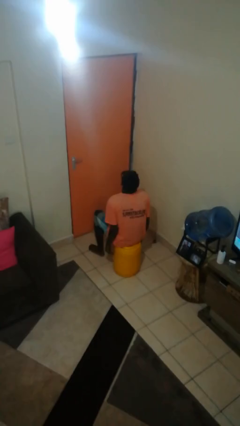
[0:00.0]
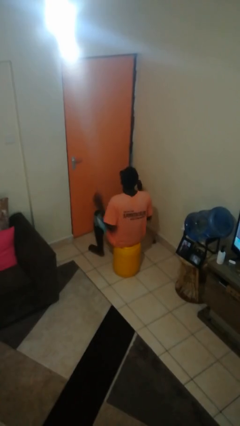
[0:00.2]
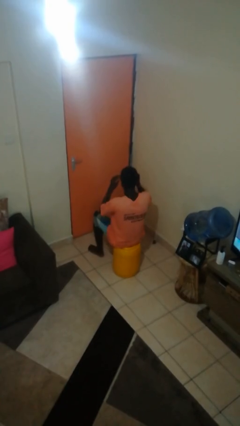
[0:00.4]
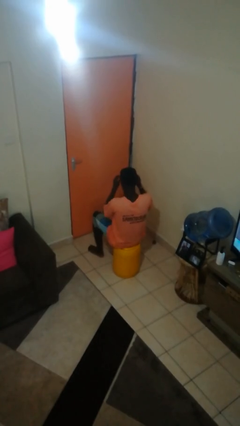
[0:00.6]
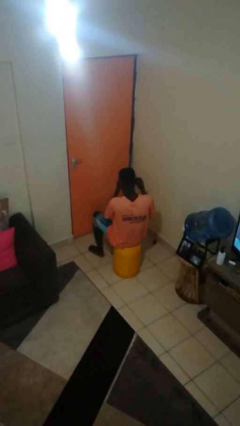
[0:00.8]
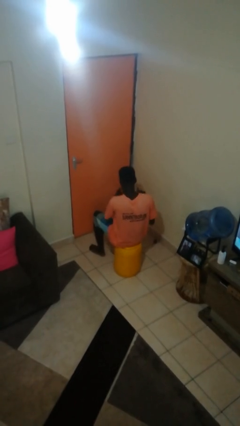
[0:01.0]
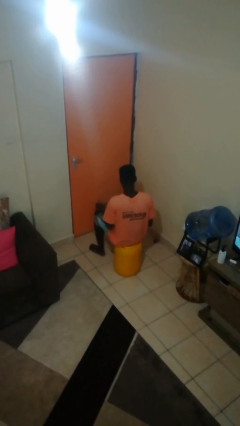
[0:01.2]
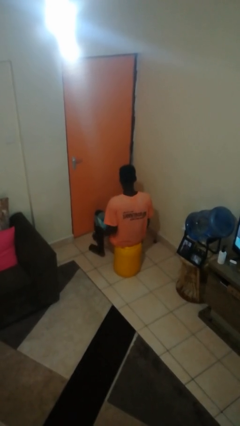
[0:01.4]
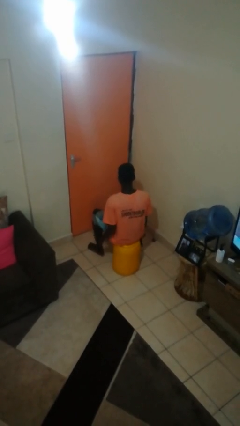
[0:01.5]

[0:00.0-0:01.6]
person takes off sunglasses

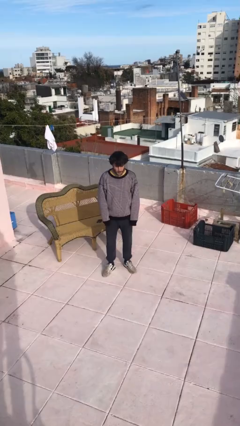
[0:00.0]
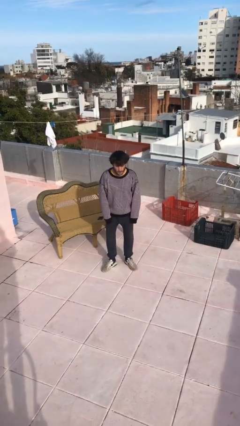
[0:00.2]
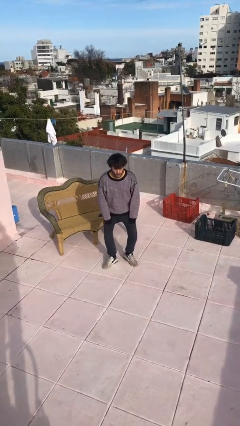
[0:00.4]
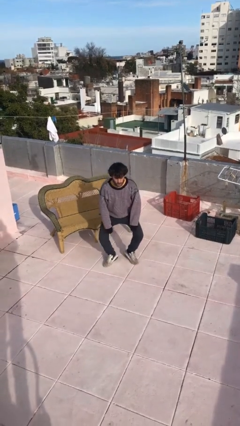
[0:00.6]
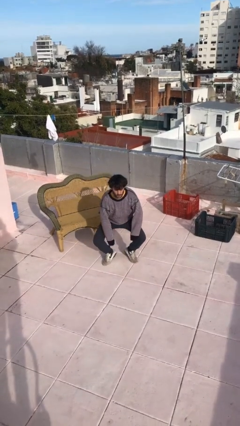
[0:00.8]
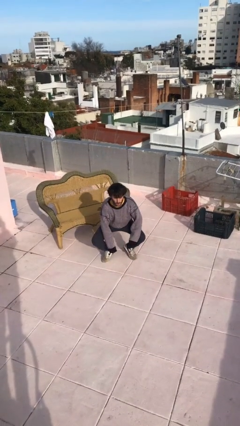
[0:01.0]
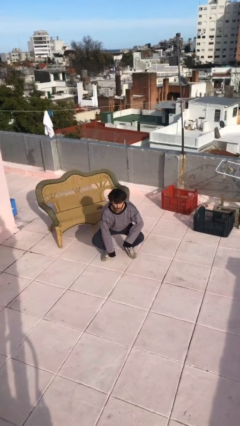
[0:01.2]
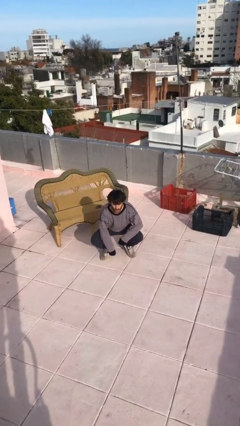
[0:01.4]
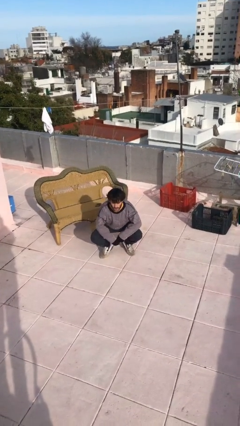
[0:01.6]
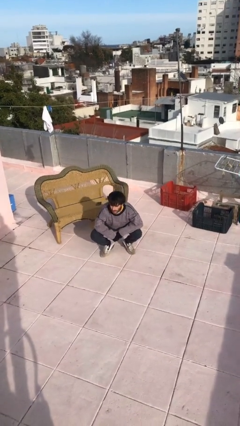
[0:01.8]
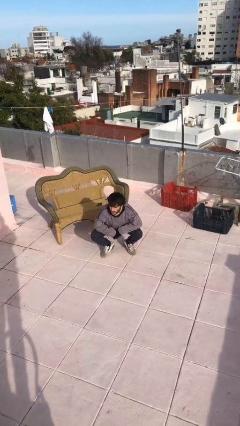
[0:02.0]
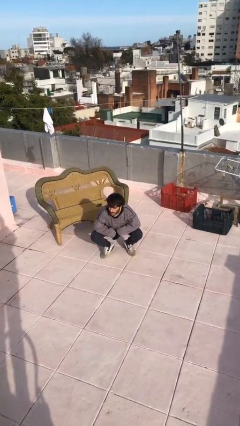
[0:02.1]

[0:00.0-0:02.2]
person squats

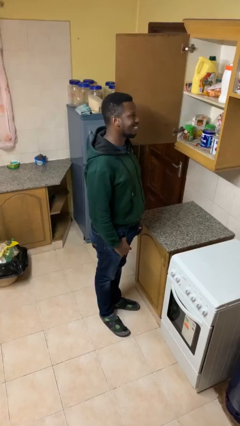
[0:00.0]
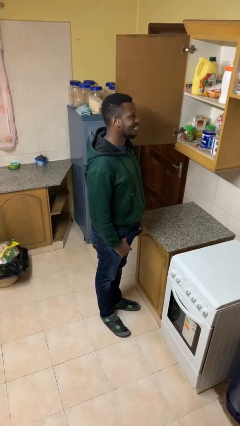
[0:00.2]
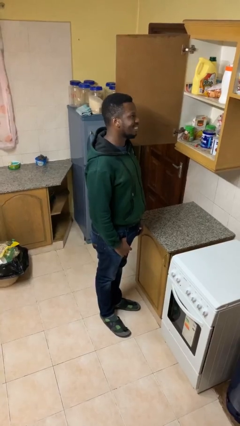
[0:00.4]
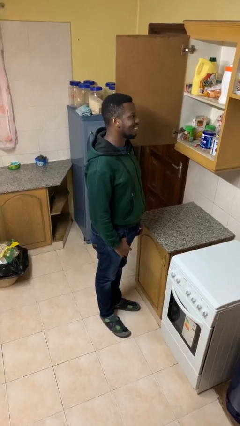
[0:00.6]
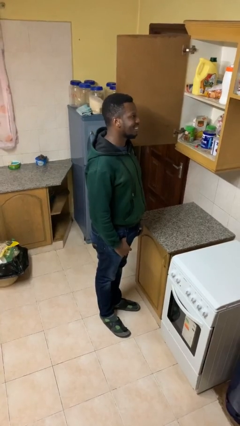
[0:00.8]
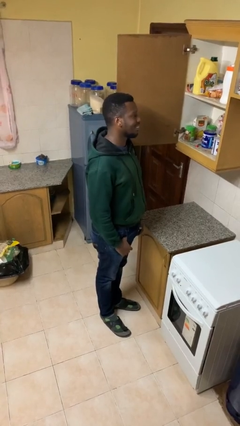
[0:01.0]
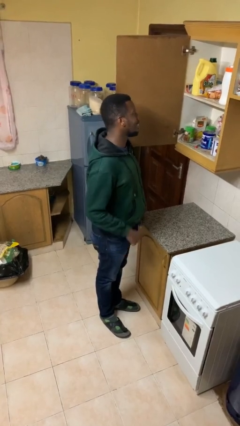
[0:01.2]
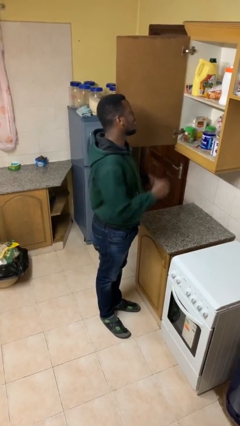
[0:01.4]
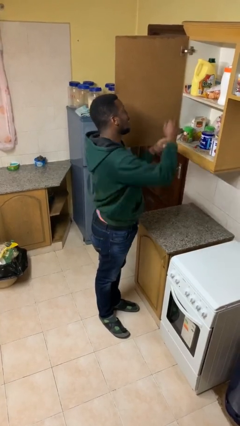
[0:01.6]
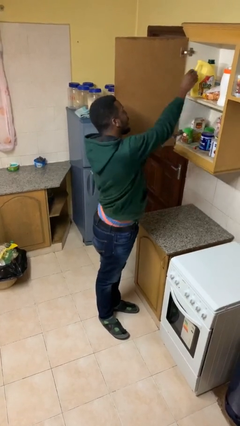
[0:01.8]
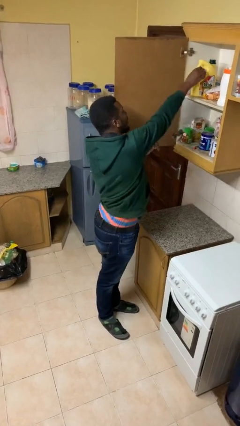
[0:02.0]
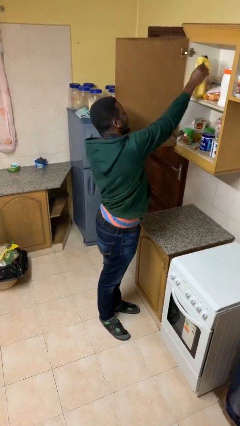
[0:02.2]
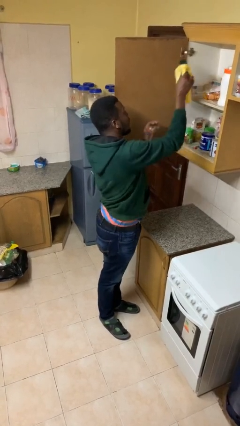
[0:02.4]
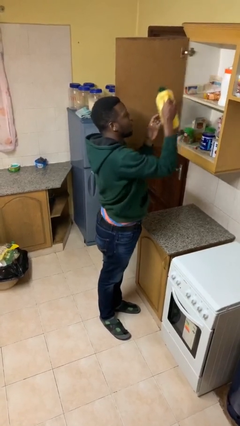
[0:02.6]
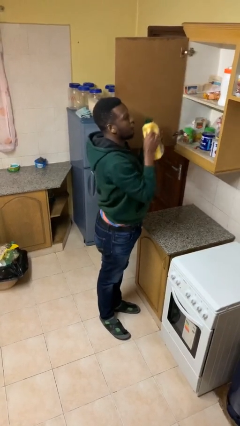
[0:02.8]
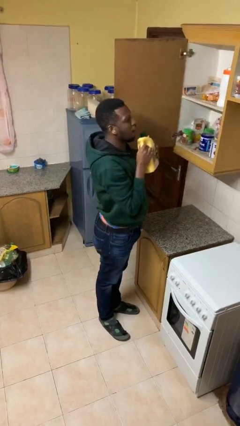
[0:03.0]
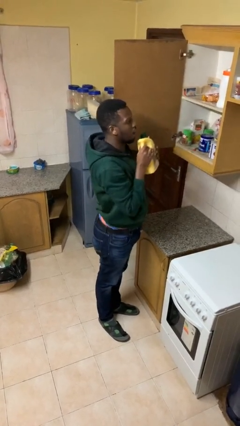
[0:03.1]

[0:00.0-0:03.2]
person picks up object from shelf

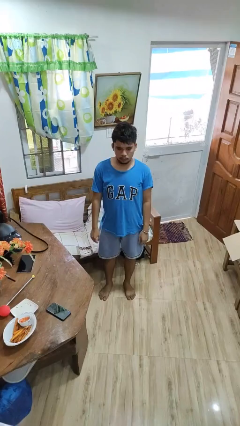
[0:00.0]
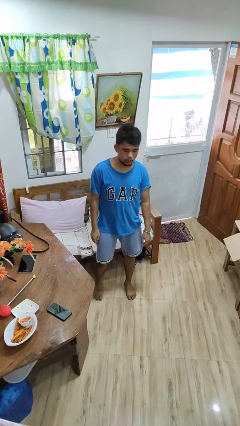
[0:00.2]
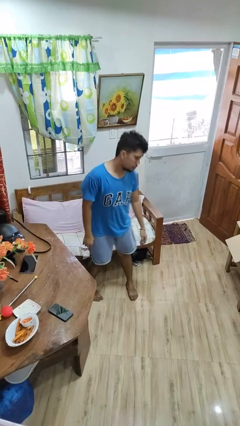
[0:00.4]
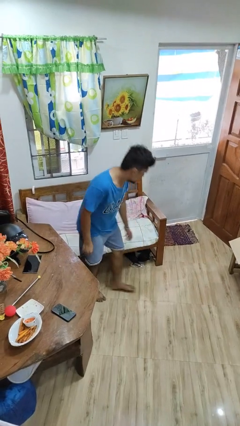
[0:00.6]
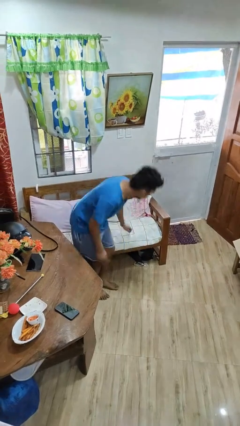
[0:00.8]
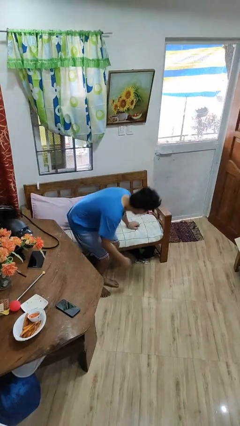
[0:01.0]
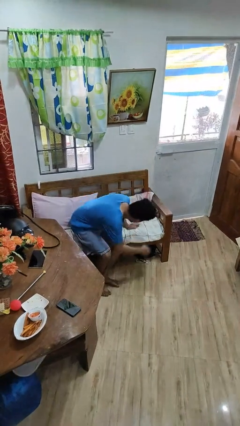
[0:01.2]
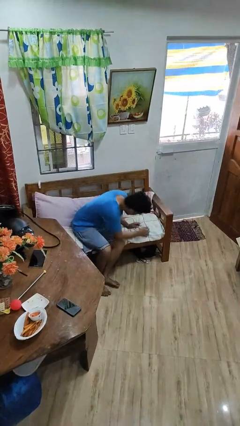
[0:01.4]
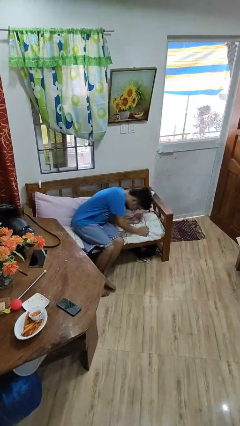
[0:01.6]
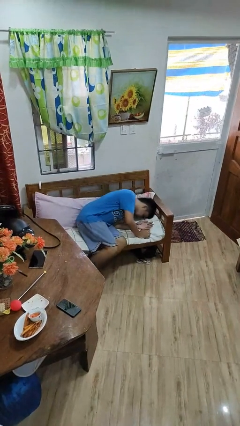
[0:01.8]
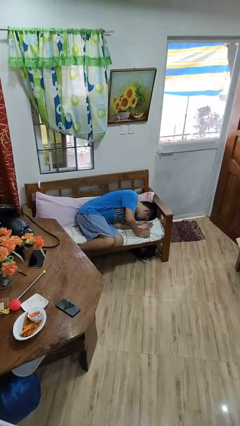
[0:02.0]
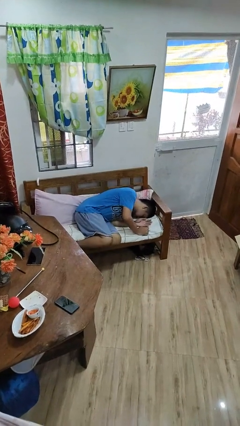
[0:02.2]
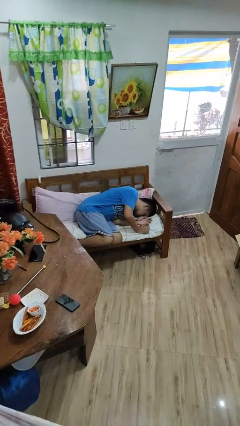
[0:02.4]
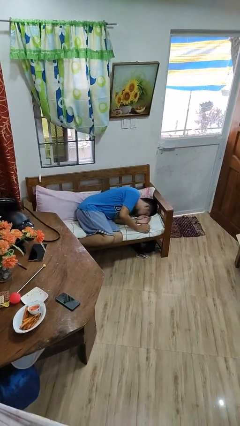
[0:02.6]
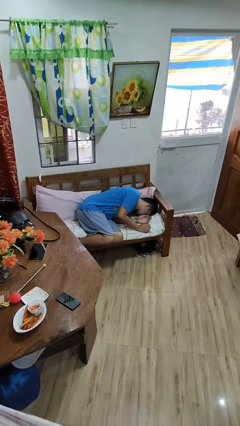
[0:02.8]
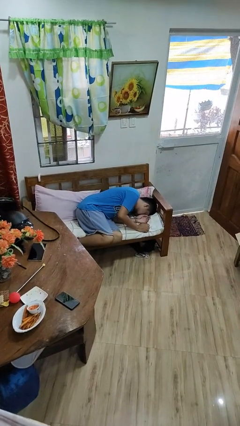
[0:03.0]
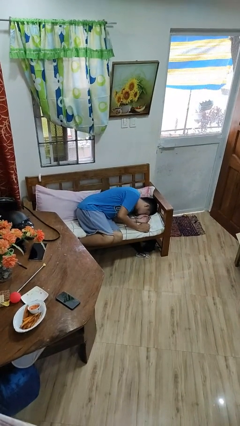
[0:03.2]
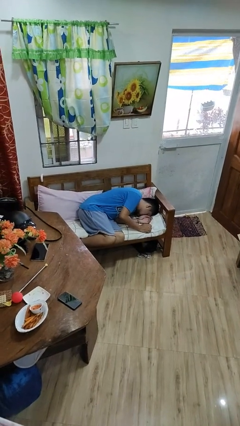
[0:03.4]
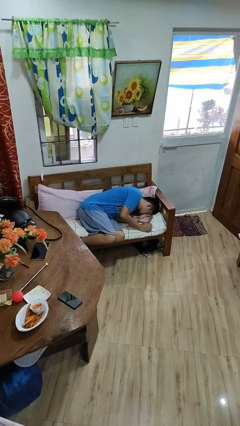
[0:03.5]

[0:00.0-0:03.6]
person lies down on couch

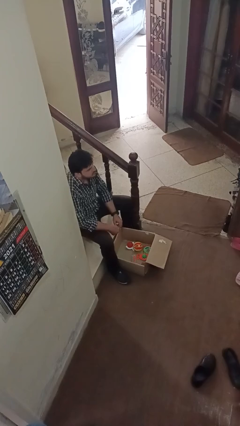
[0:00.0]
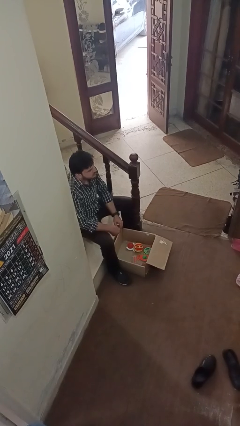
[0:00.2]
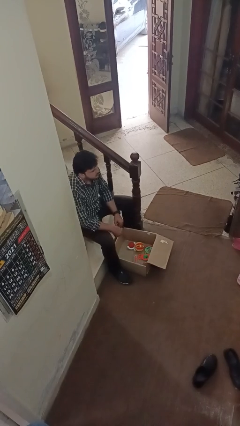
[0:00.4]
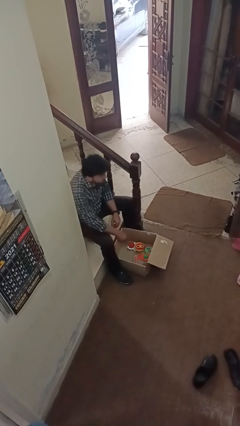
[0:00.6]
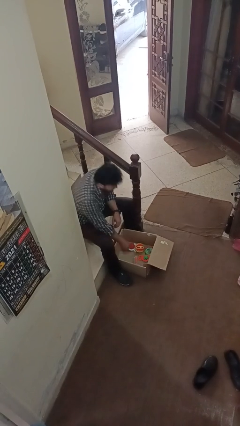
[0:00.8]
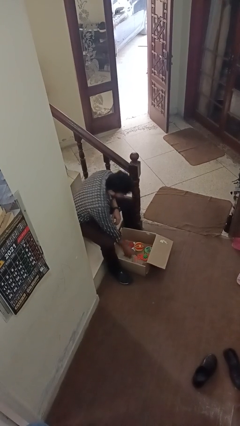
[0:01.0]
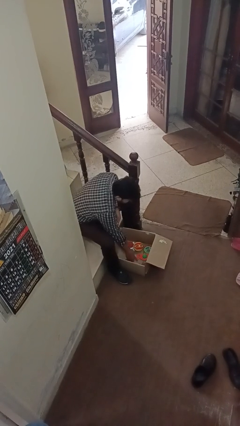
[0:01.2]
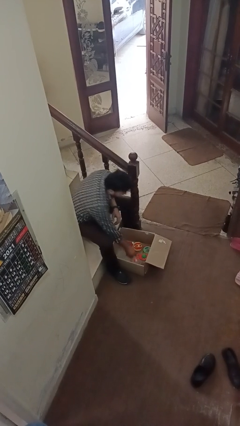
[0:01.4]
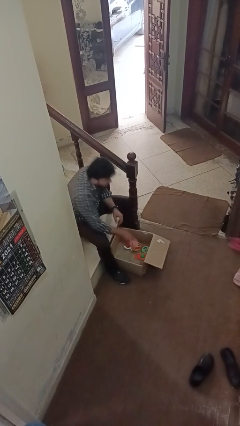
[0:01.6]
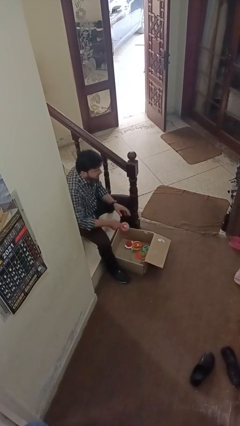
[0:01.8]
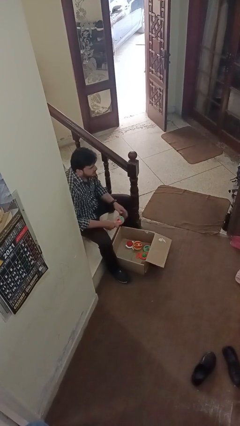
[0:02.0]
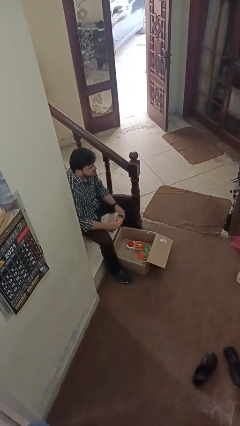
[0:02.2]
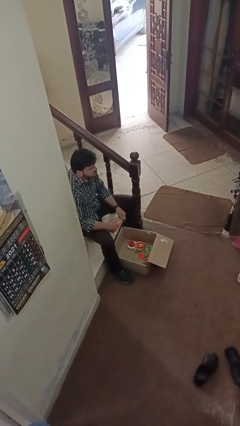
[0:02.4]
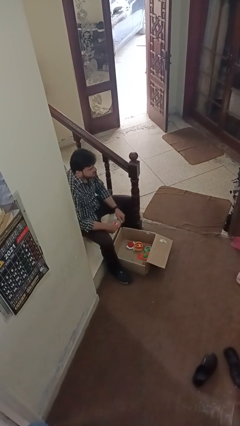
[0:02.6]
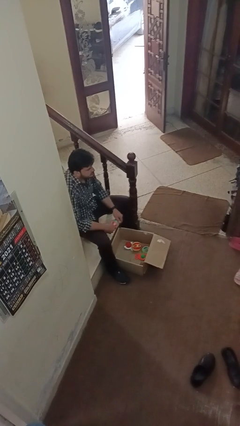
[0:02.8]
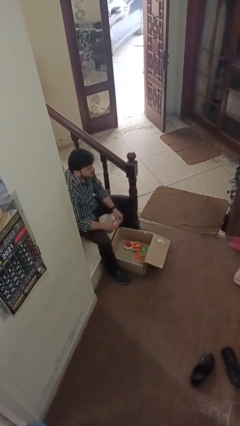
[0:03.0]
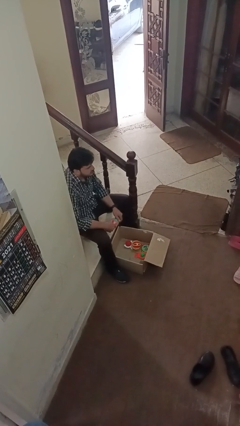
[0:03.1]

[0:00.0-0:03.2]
person takes object from box

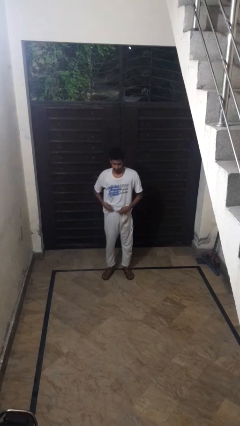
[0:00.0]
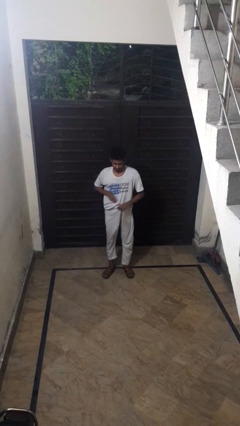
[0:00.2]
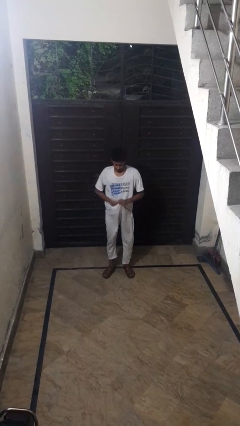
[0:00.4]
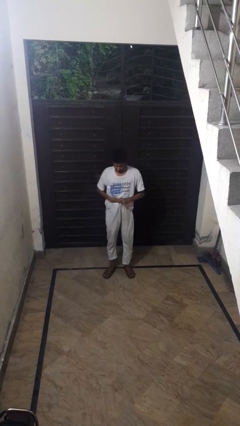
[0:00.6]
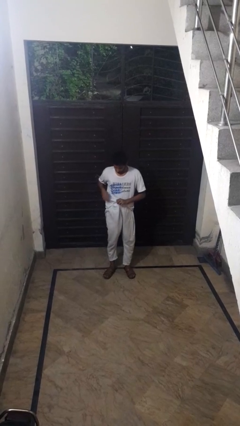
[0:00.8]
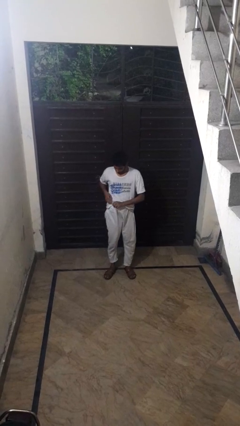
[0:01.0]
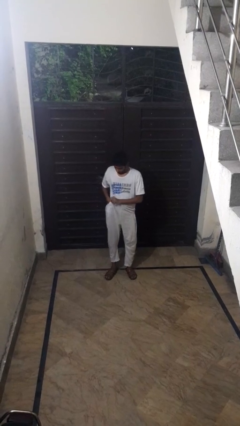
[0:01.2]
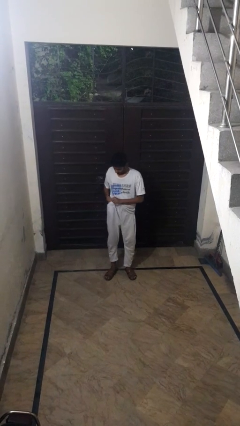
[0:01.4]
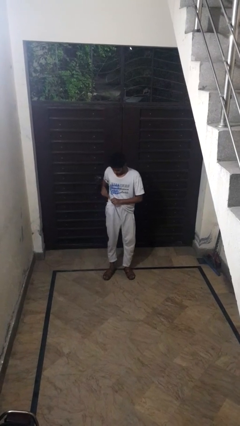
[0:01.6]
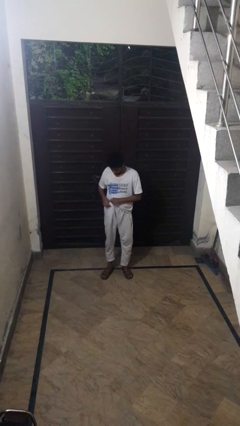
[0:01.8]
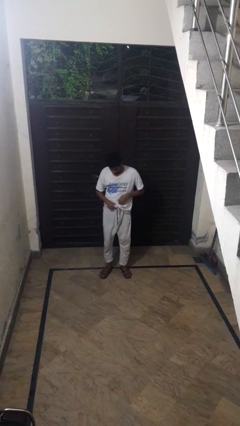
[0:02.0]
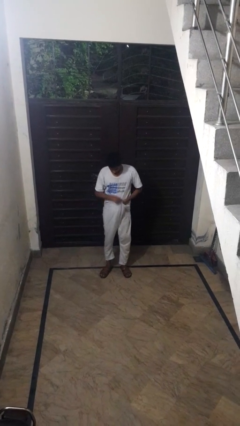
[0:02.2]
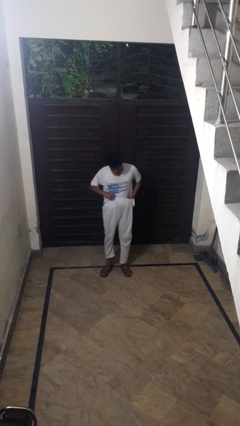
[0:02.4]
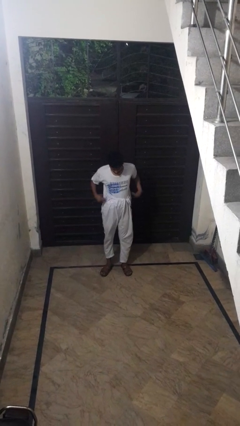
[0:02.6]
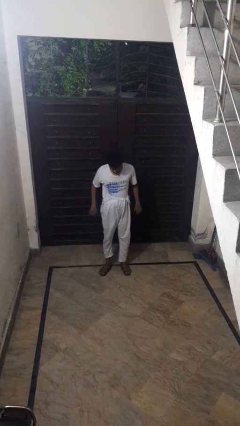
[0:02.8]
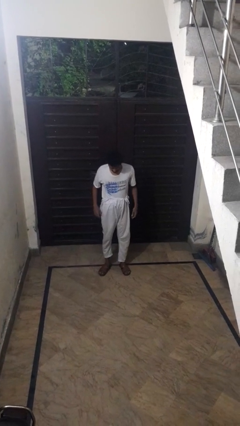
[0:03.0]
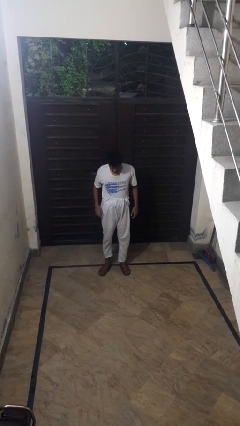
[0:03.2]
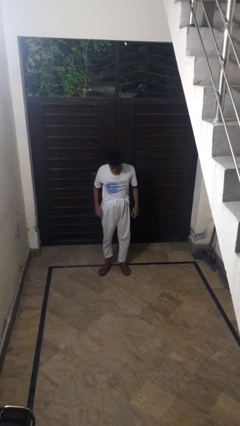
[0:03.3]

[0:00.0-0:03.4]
person tucks in shirt
